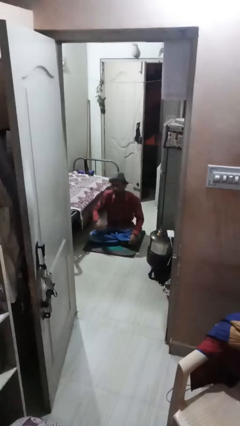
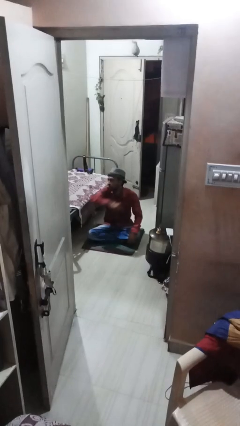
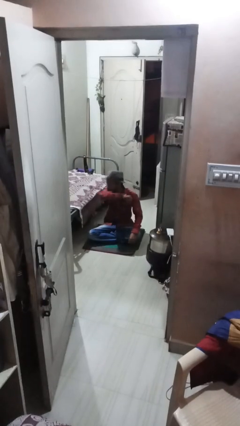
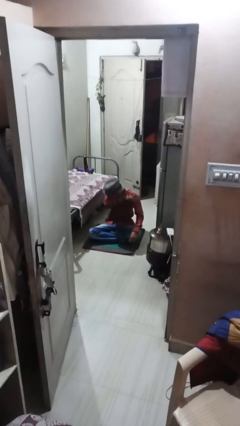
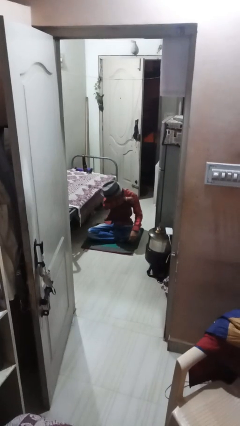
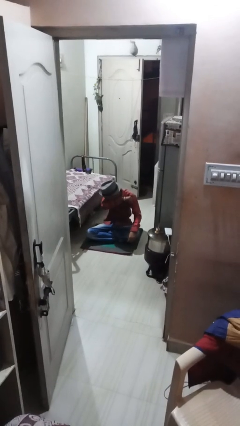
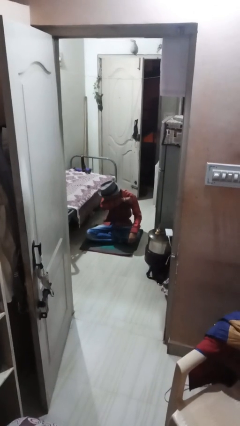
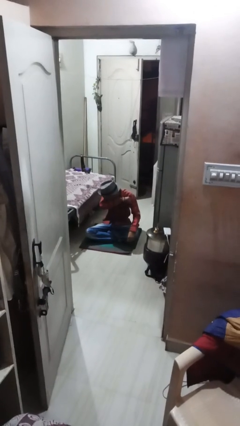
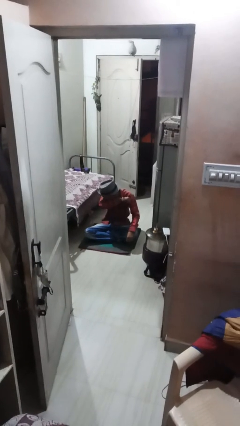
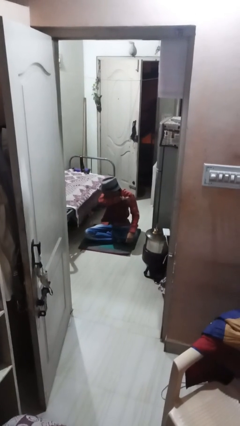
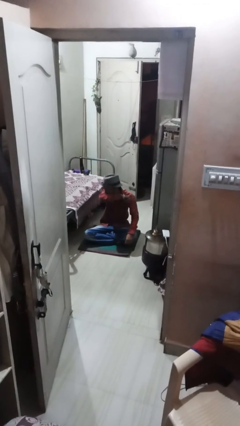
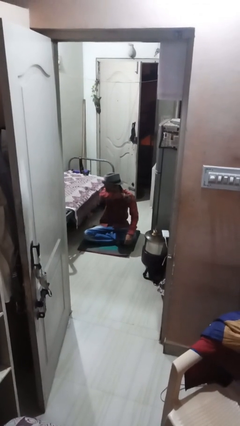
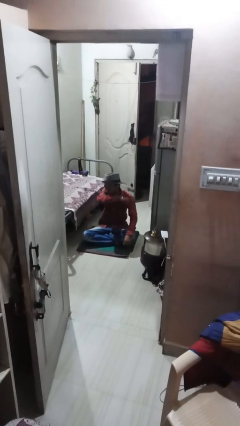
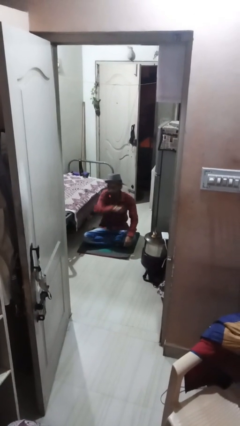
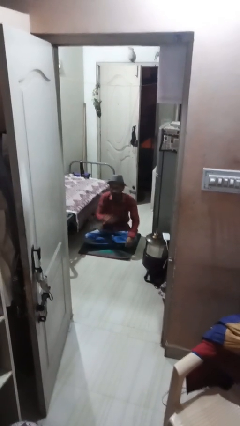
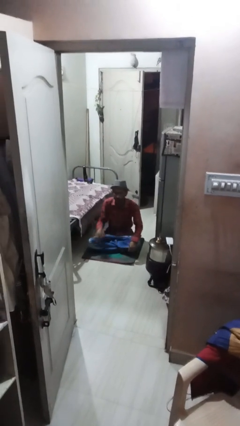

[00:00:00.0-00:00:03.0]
person sneezes into arm

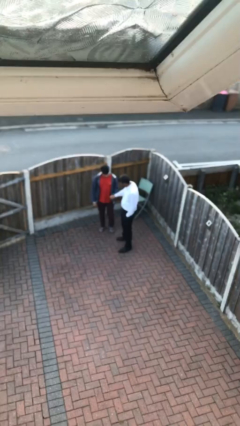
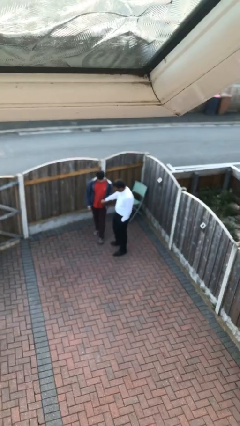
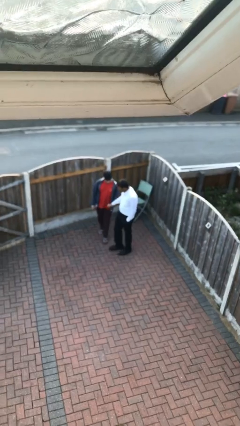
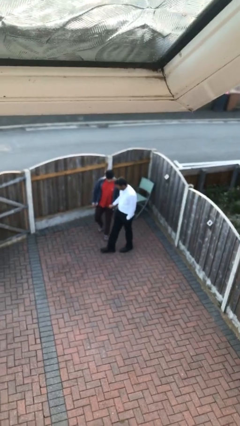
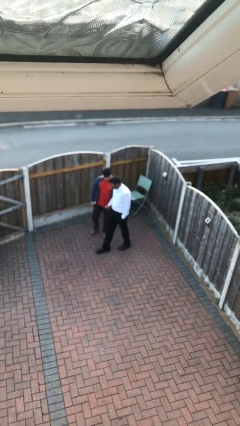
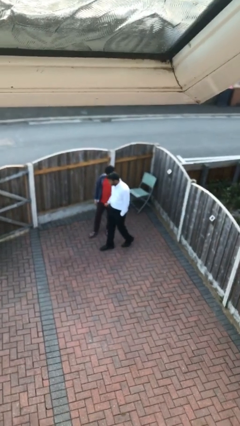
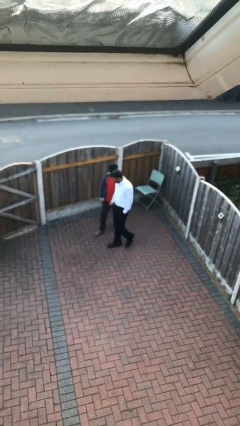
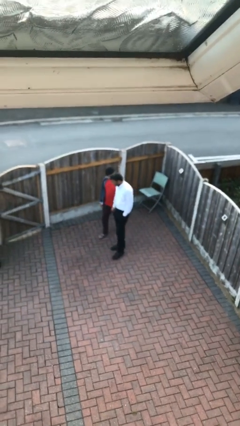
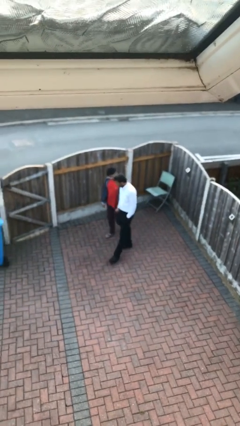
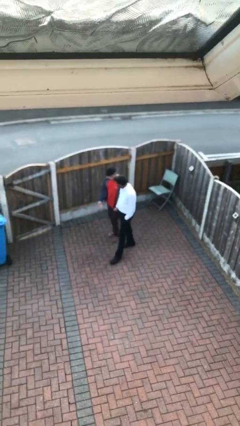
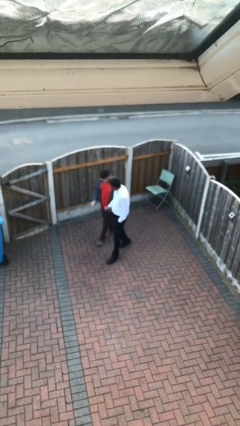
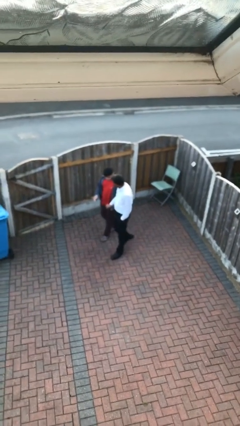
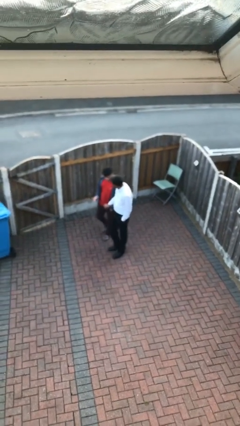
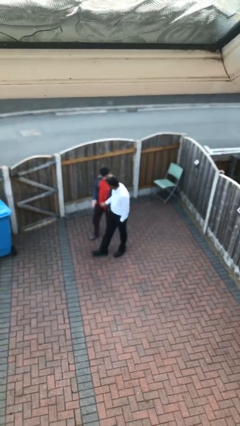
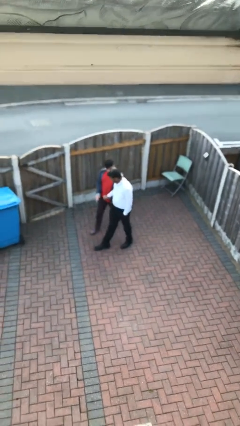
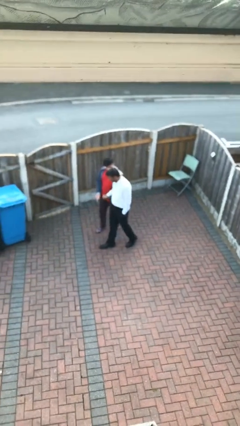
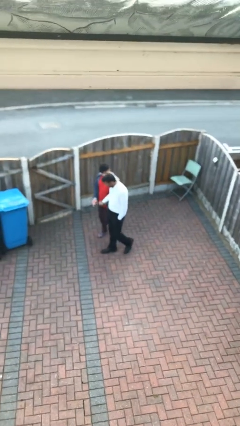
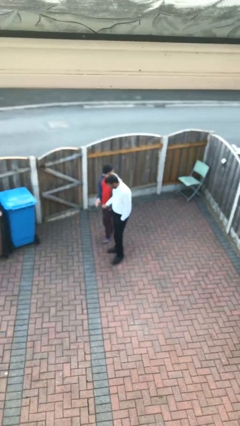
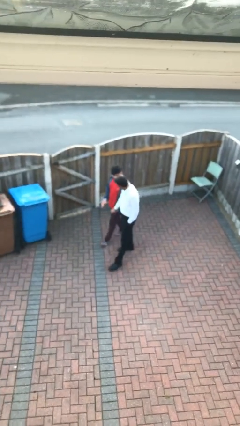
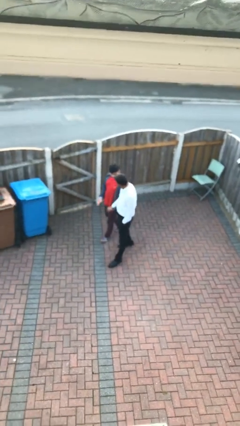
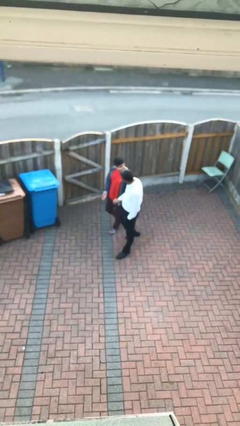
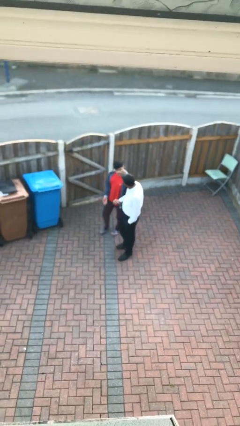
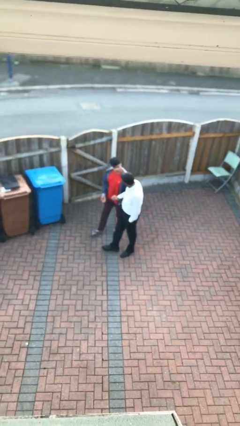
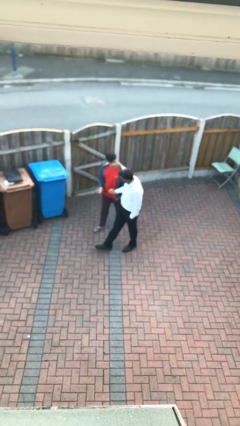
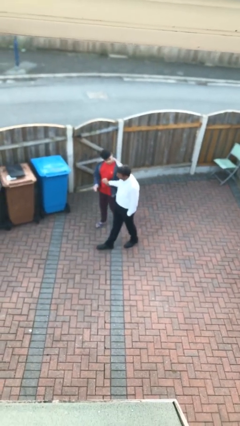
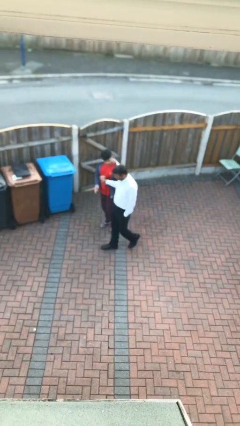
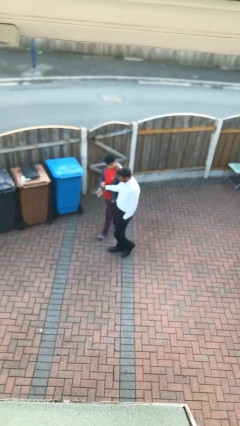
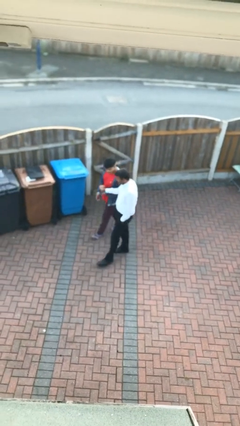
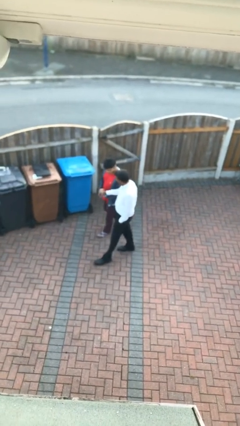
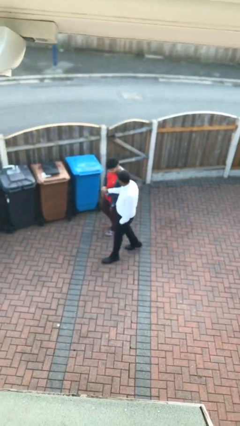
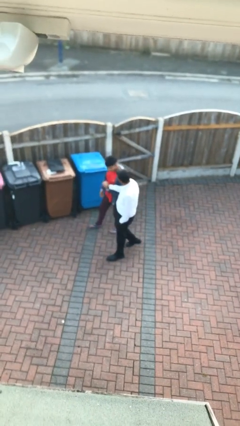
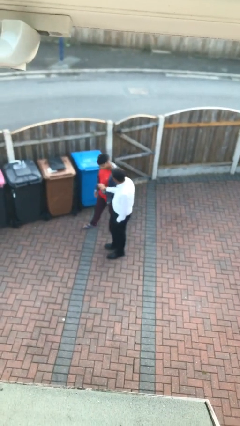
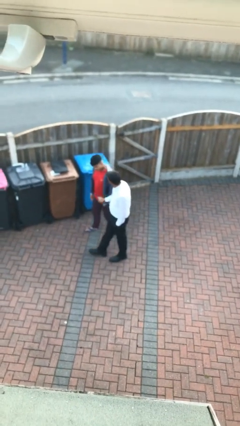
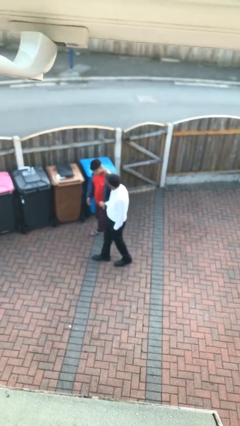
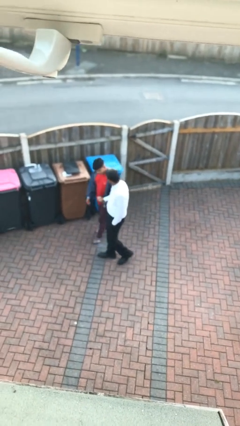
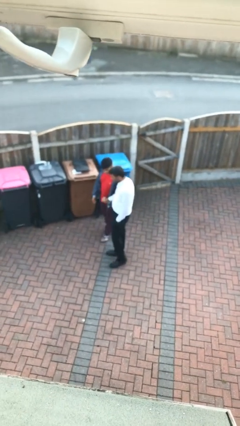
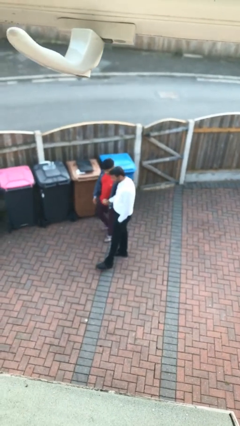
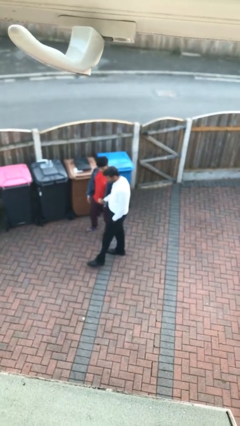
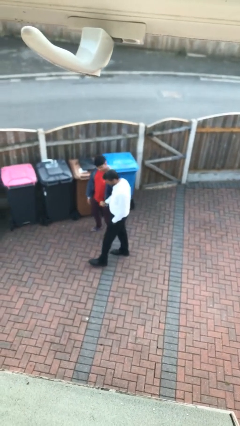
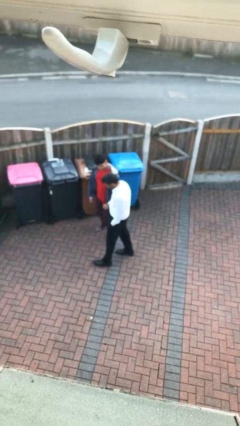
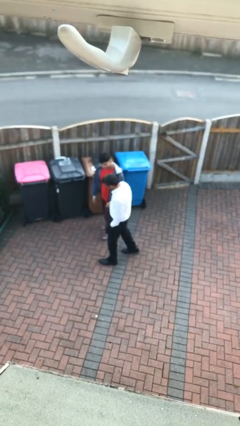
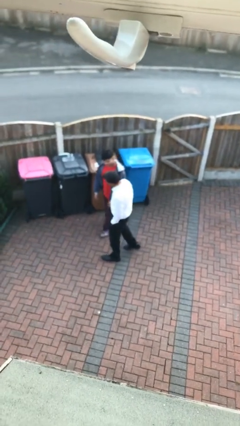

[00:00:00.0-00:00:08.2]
person holds hand

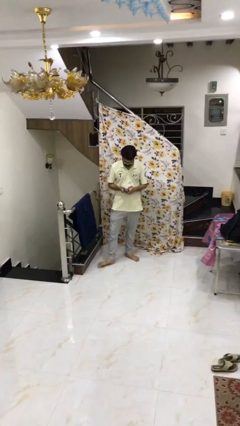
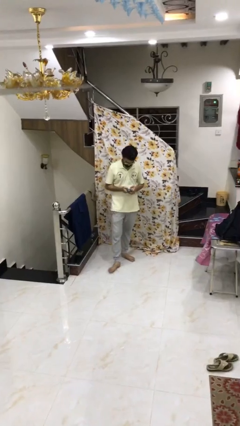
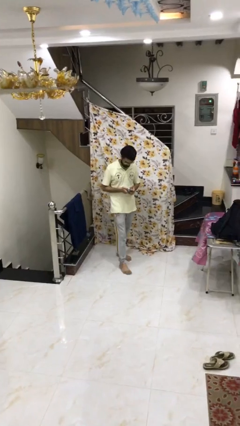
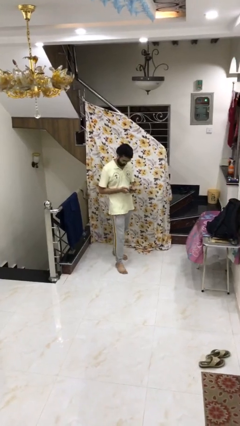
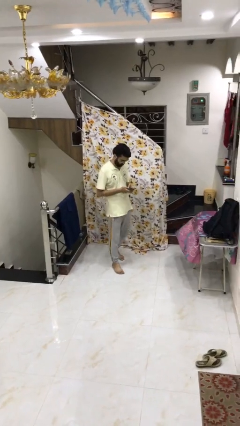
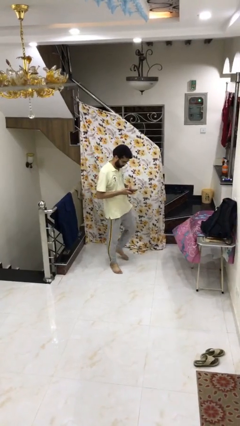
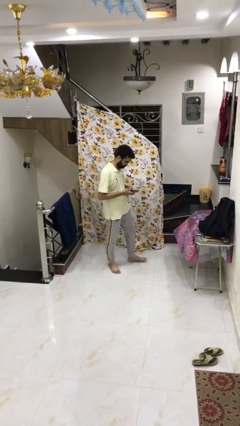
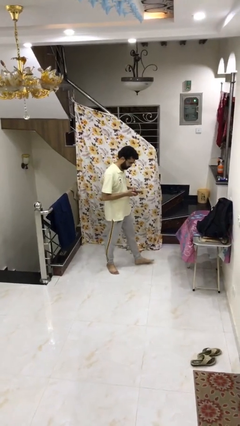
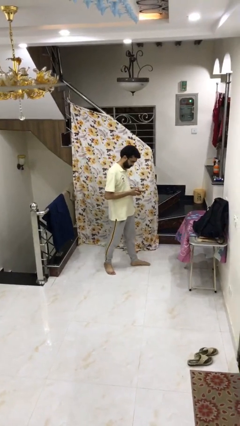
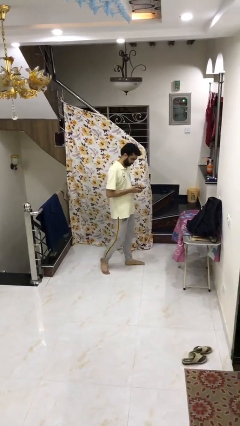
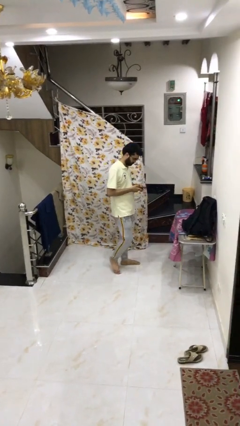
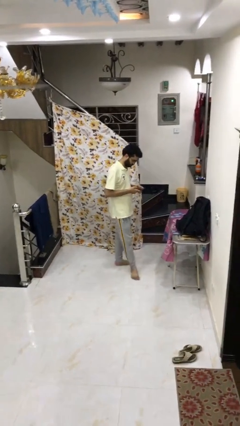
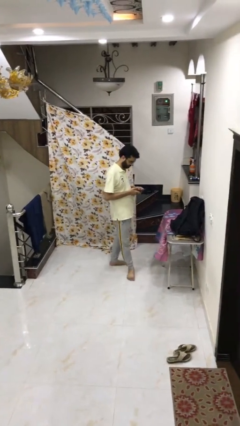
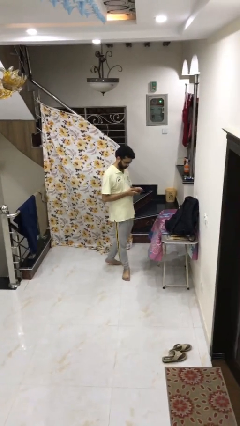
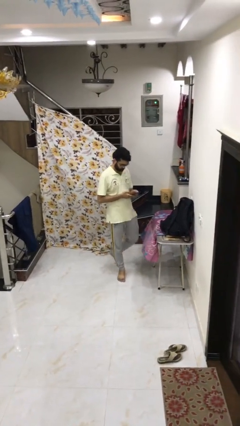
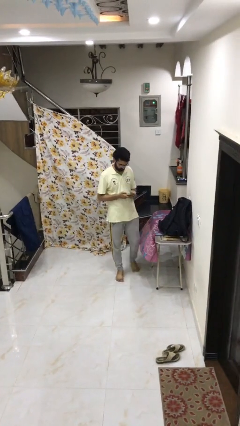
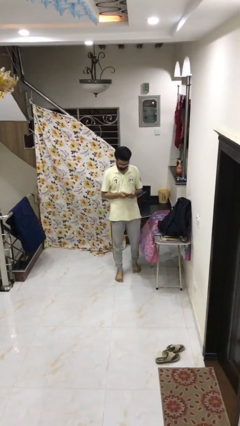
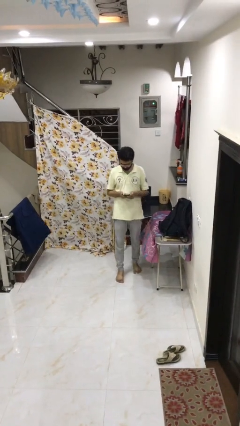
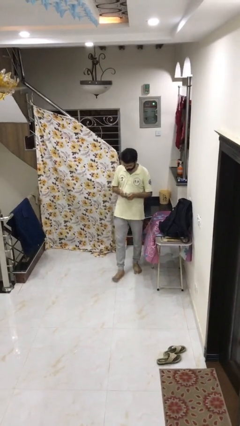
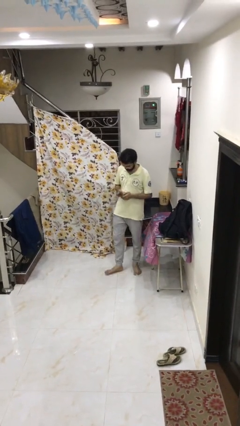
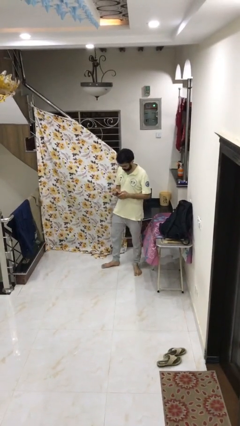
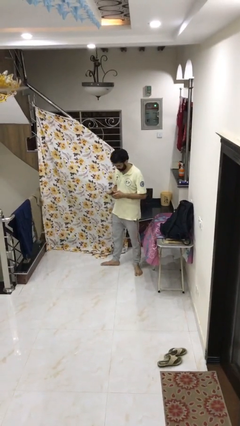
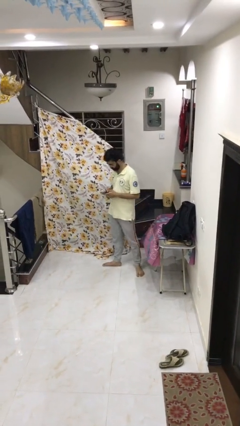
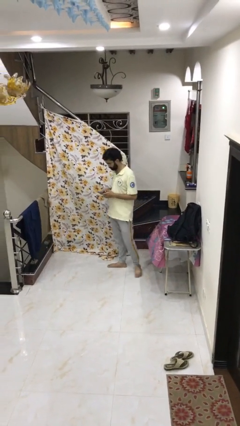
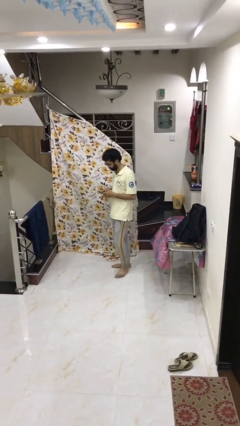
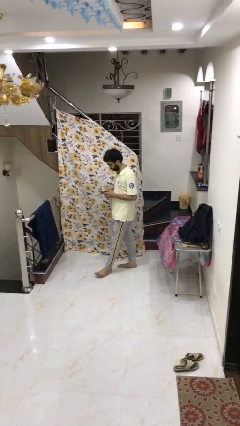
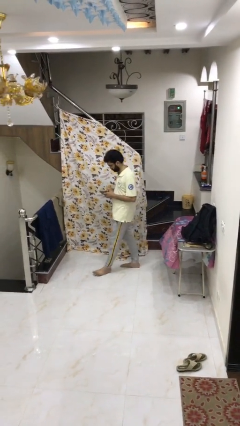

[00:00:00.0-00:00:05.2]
person talks on phone

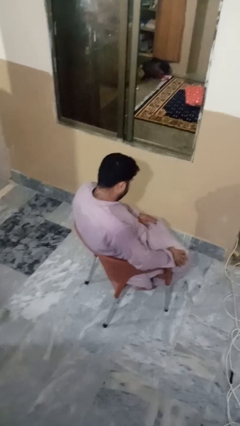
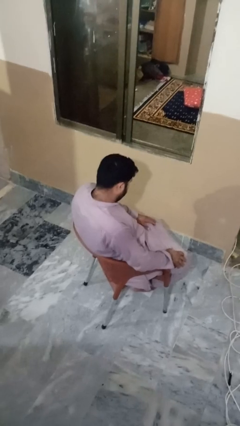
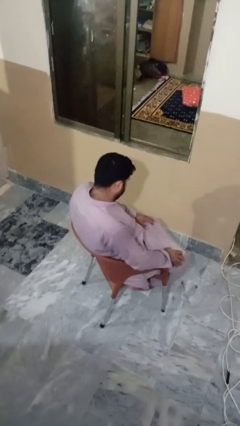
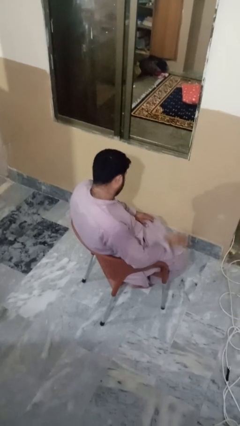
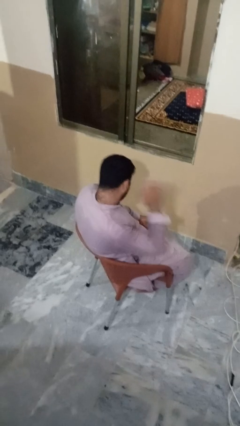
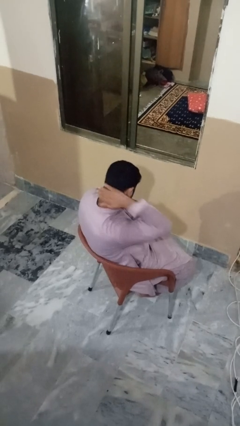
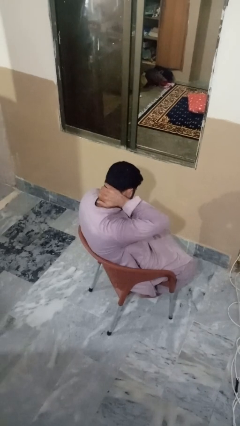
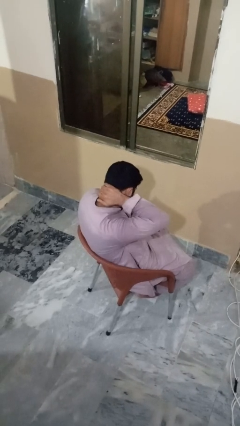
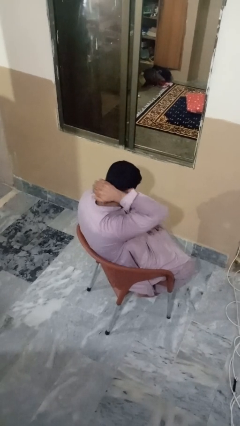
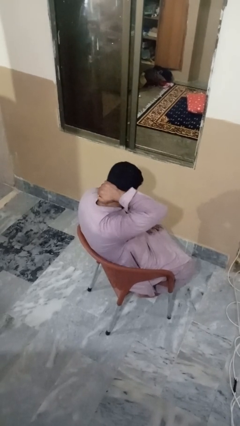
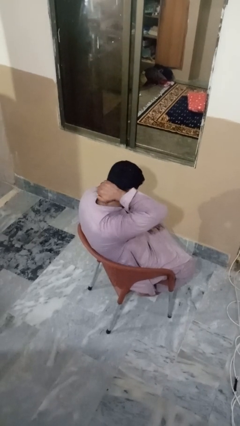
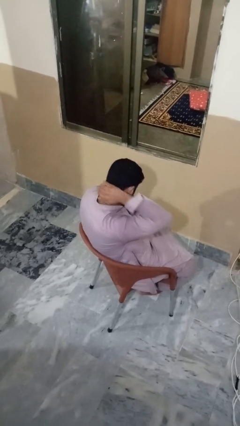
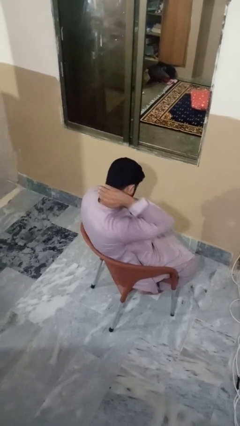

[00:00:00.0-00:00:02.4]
person rubs neck
